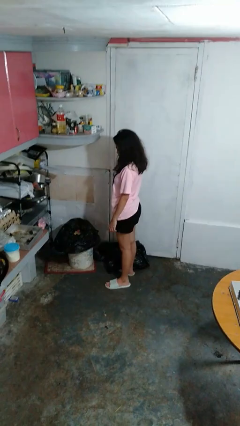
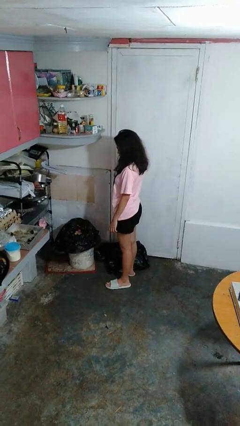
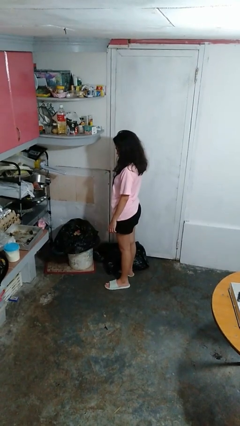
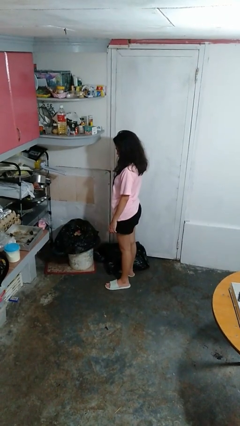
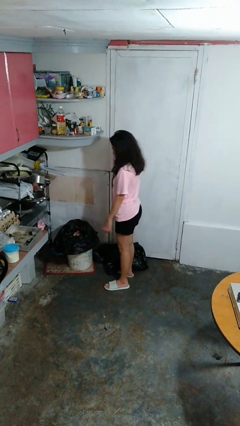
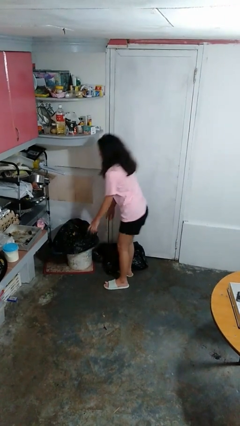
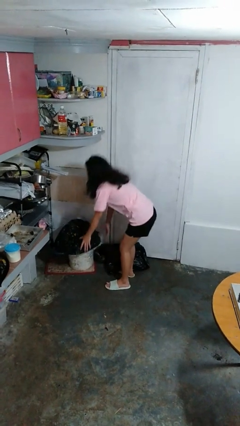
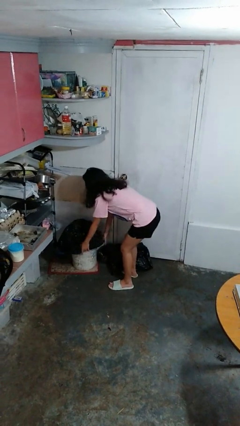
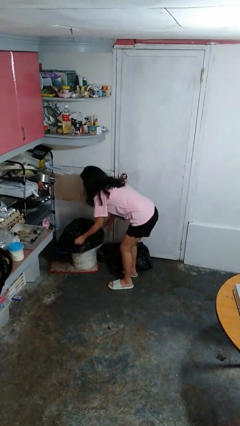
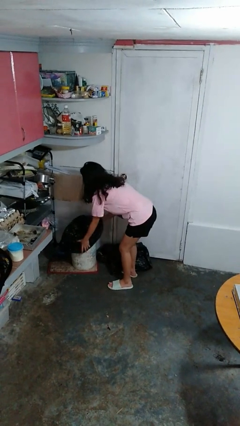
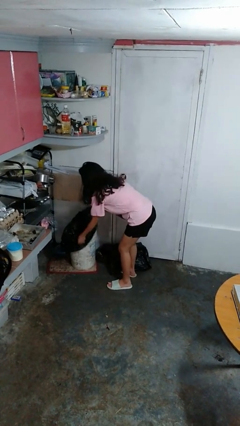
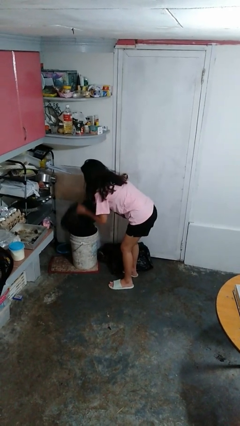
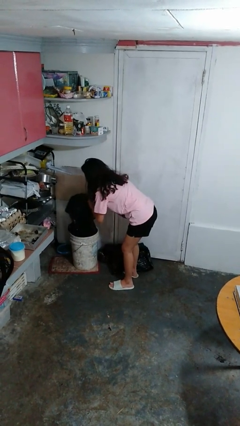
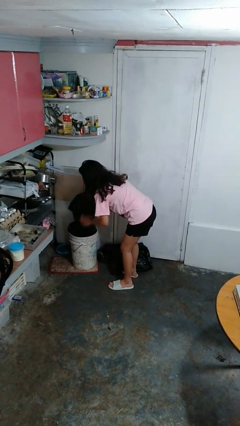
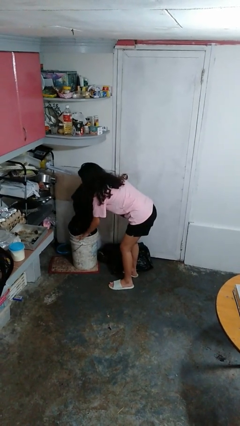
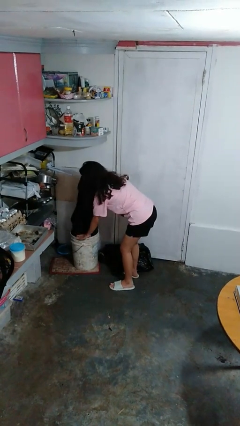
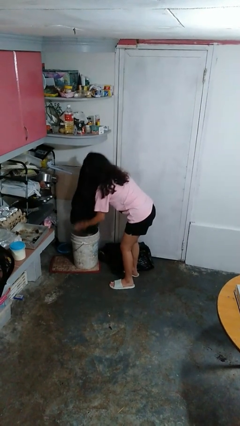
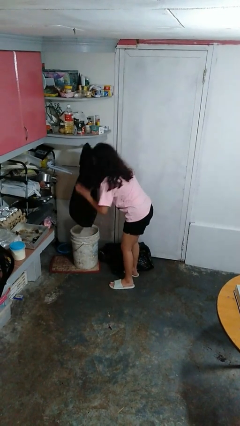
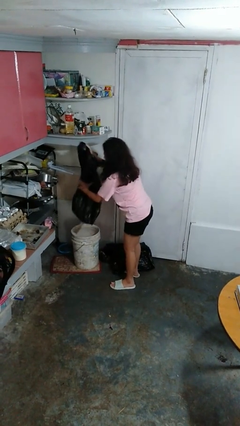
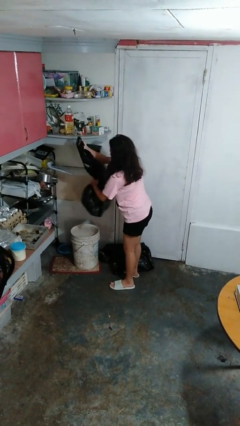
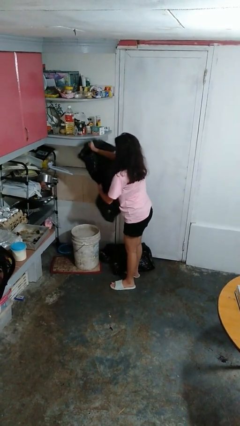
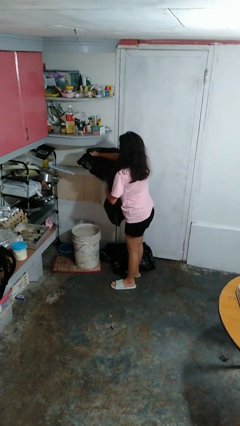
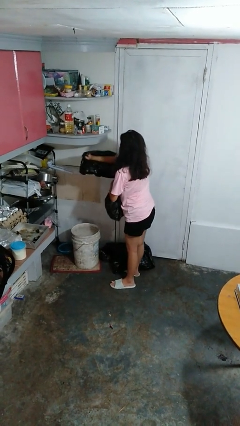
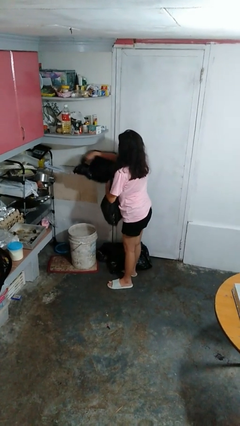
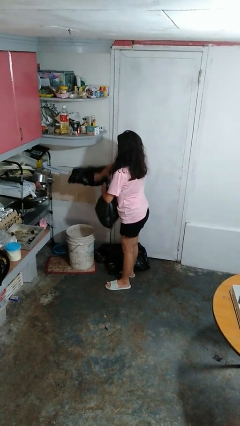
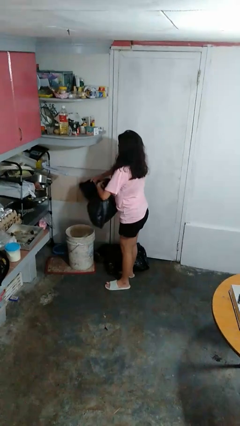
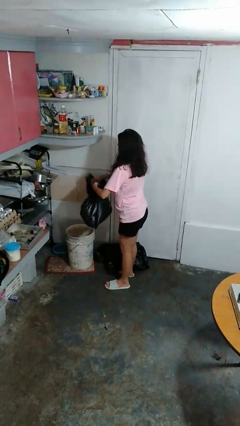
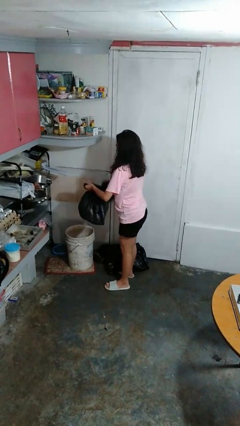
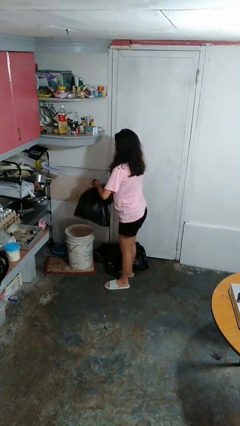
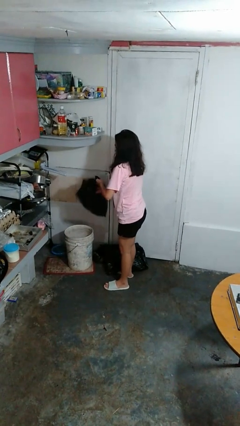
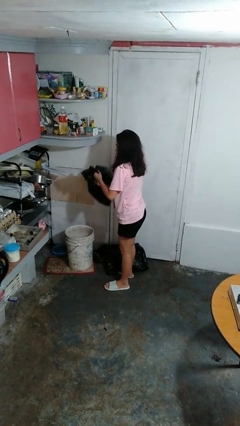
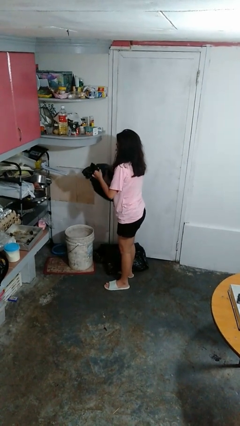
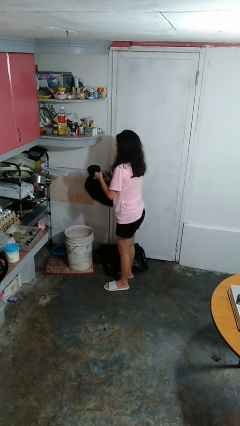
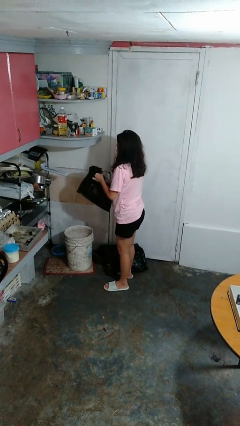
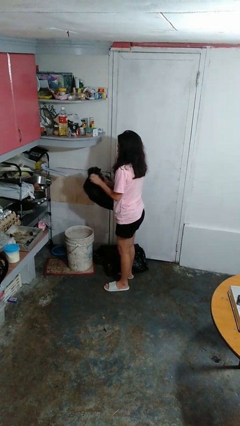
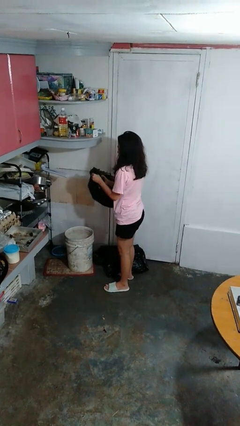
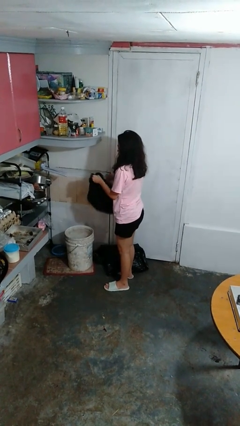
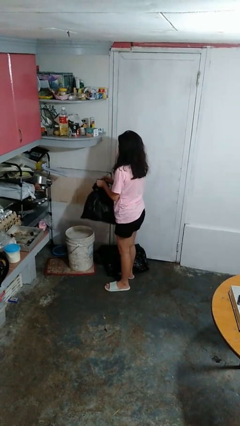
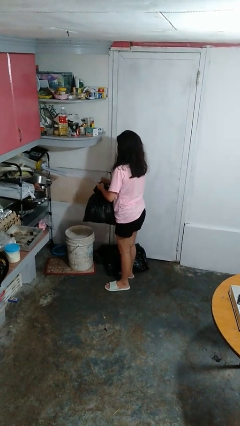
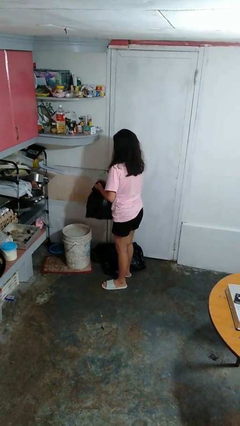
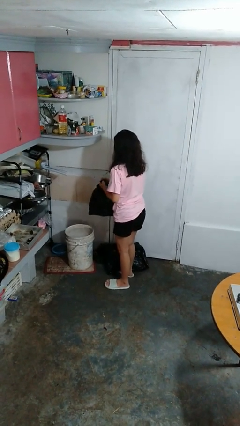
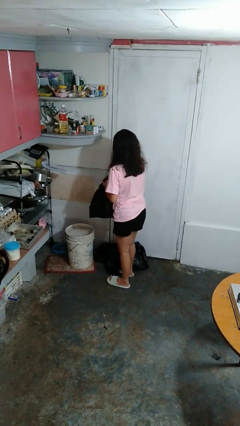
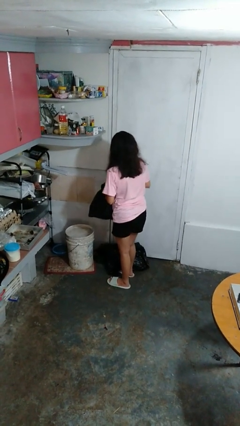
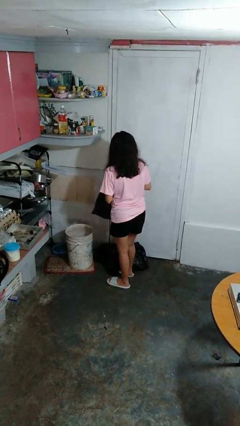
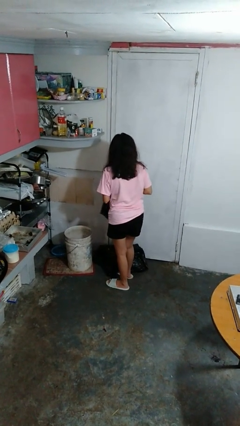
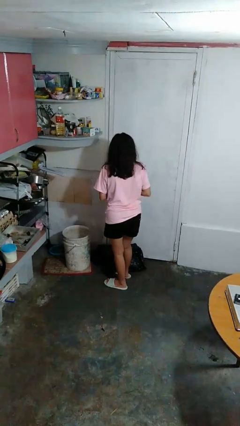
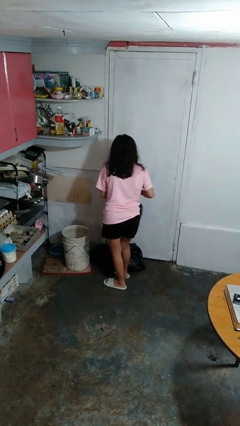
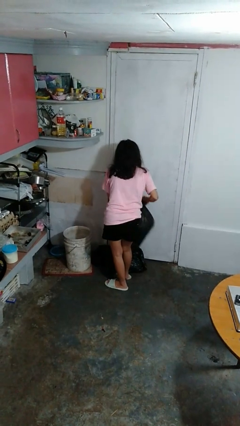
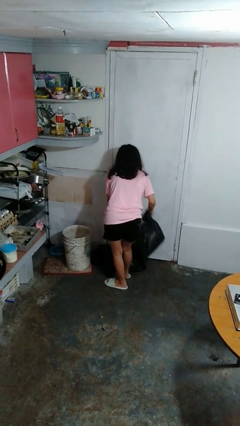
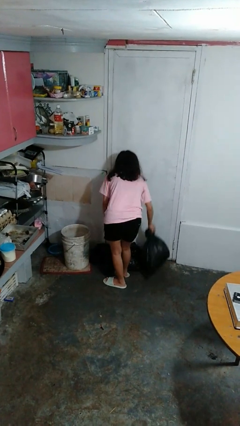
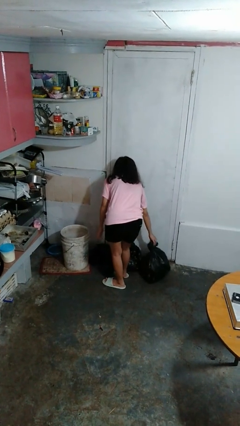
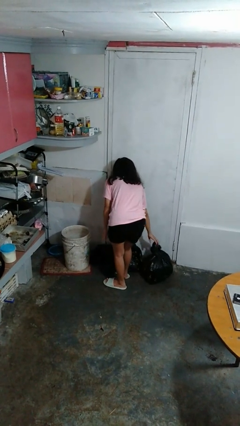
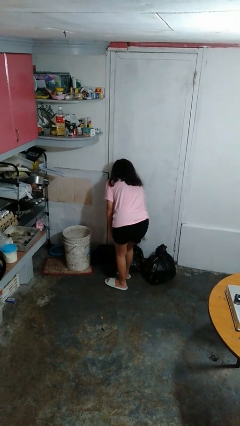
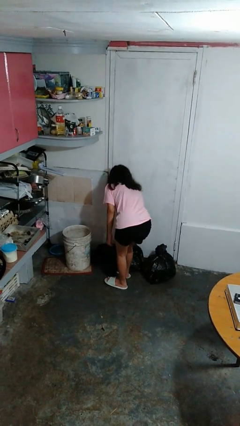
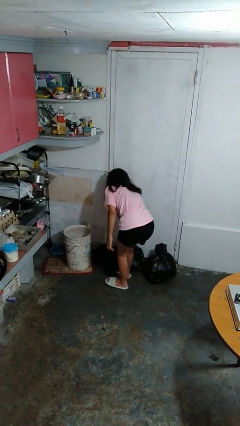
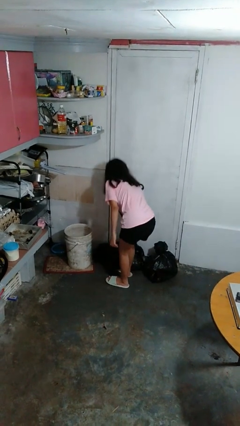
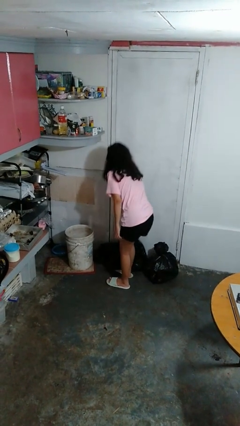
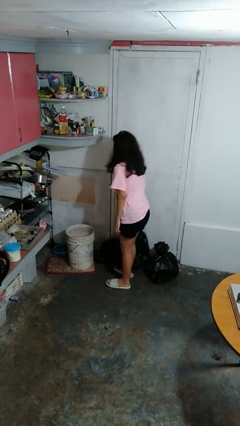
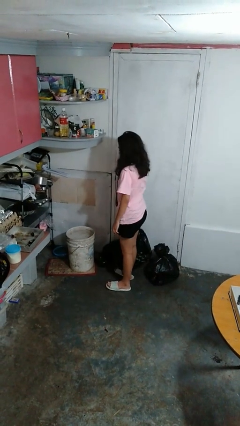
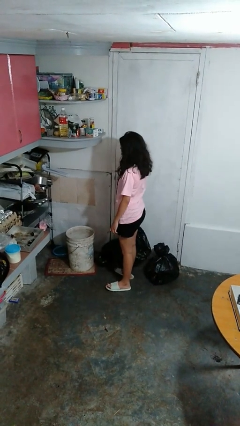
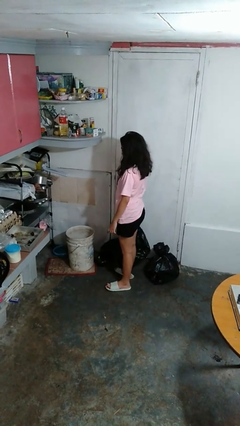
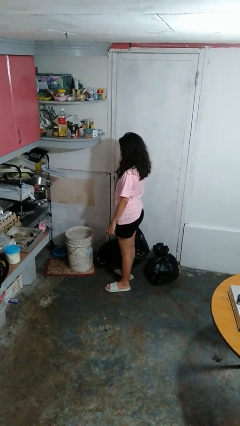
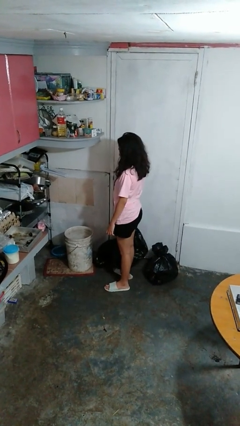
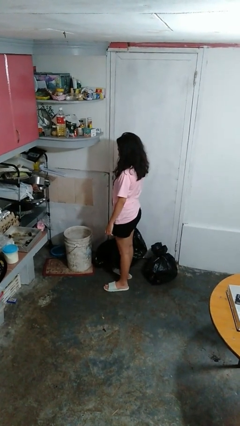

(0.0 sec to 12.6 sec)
person removes trashbag from trashcan

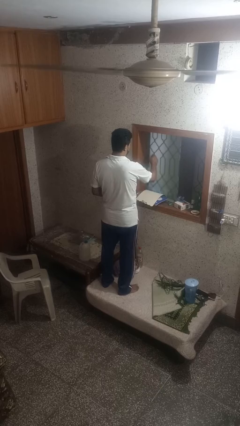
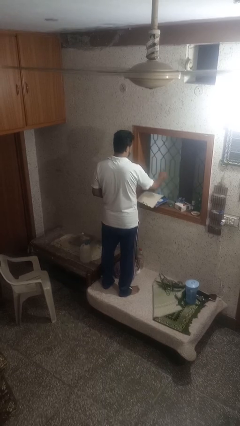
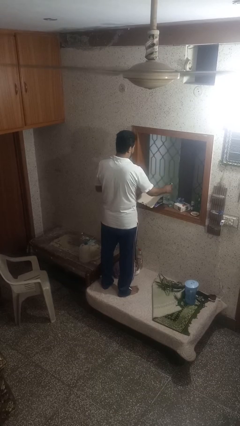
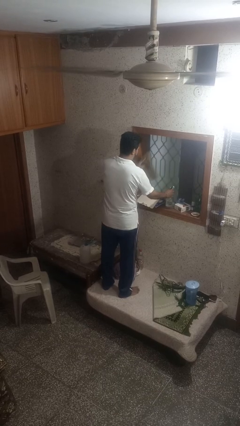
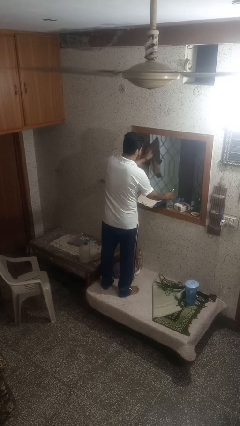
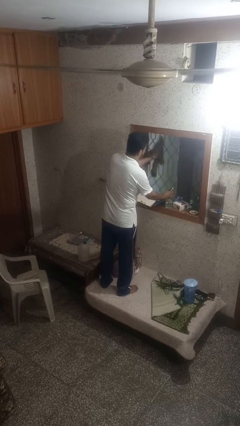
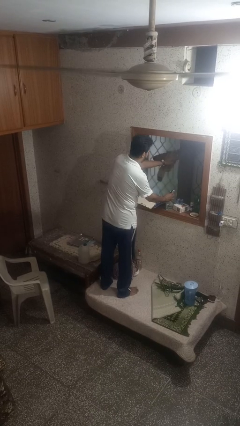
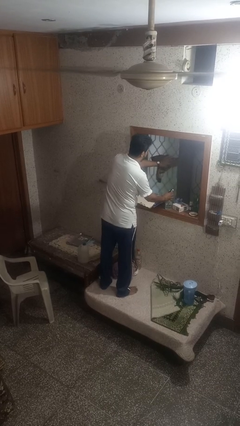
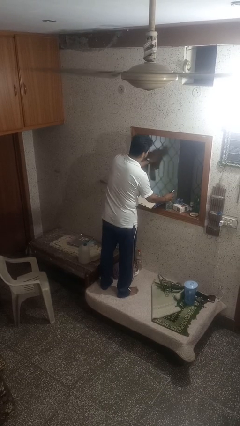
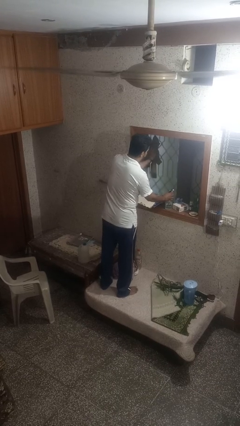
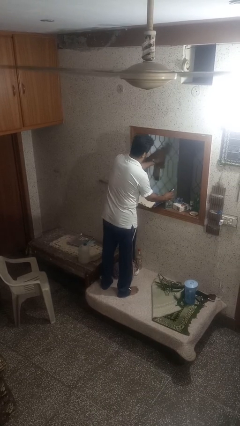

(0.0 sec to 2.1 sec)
person washes window

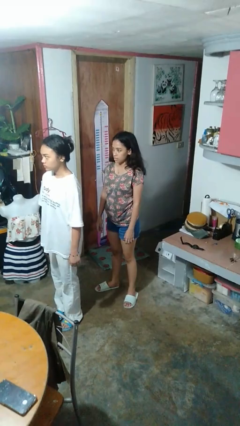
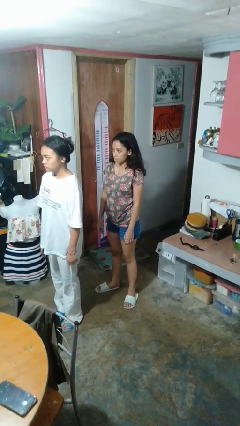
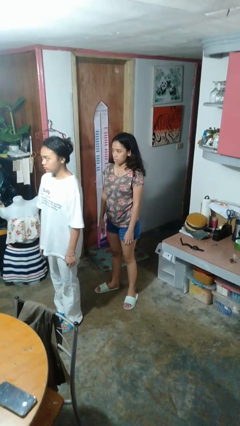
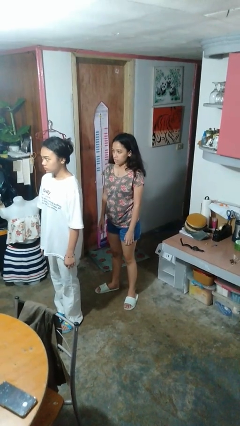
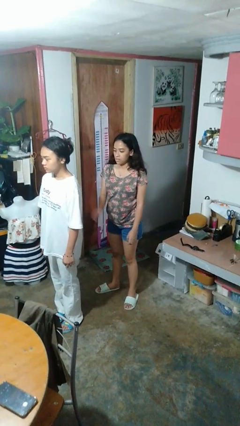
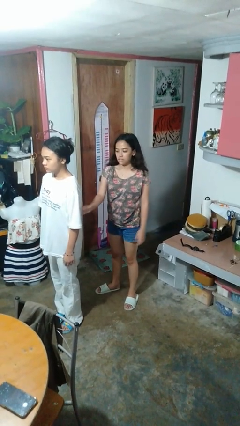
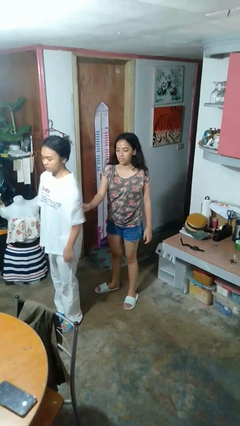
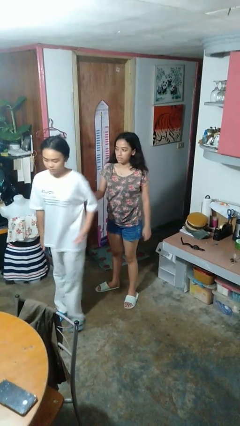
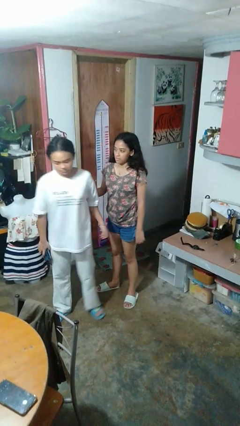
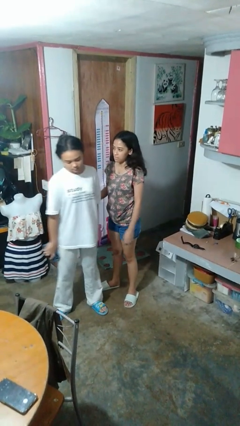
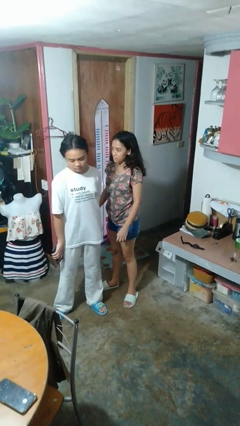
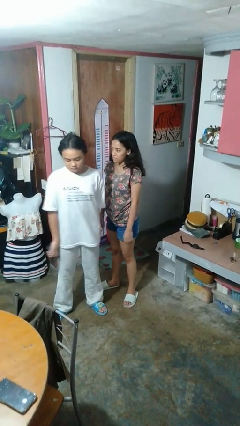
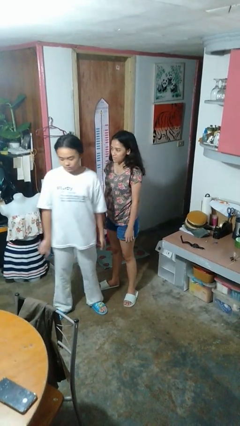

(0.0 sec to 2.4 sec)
person grabs person by bicep

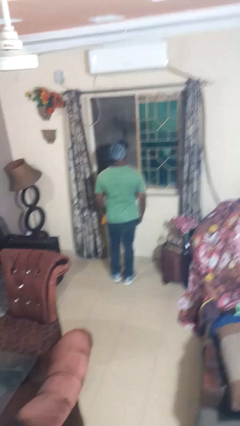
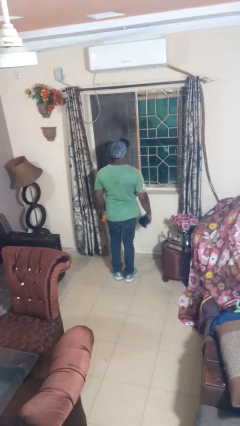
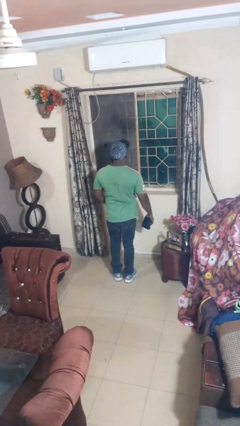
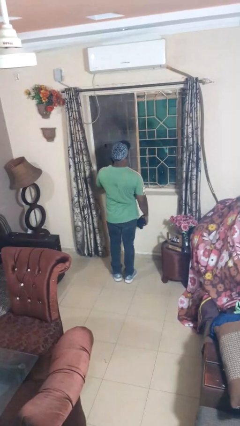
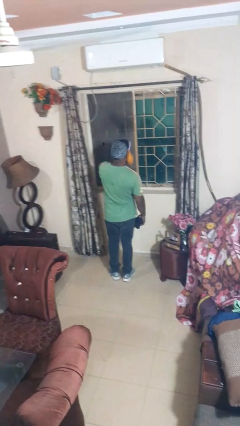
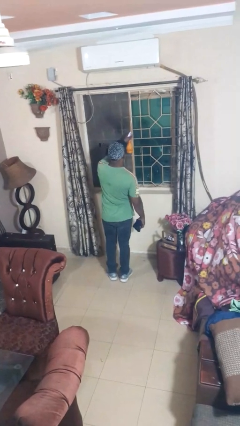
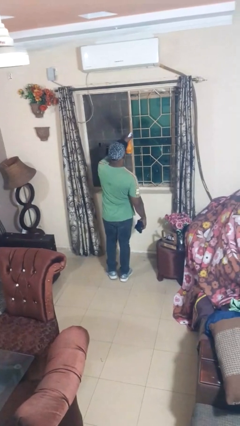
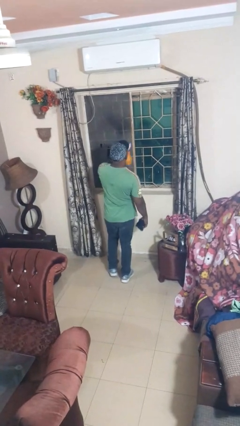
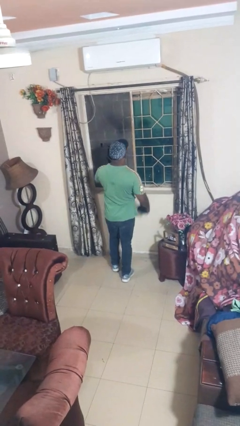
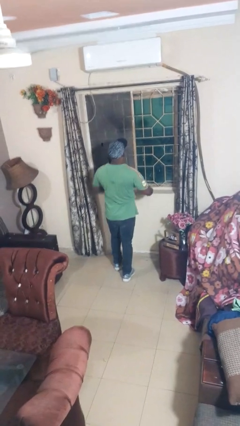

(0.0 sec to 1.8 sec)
person sprays from bottle
